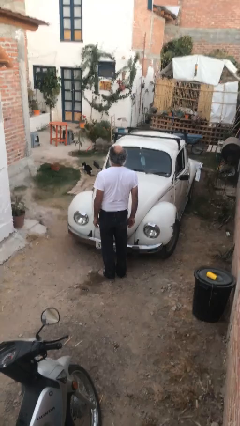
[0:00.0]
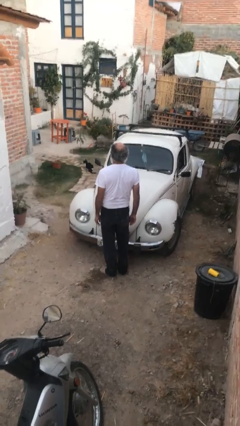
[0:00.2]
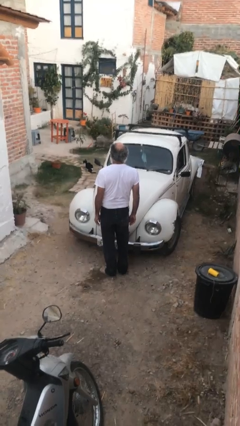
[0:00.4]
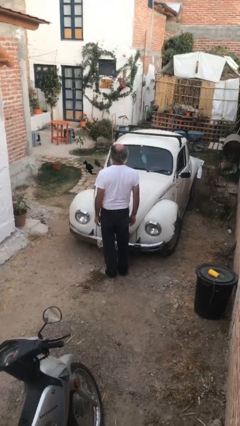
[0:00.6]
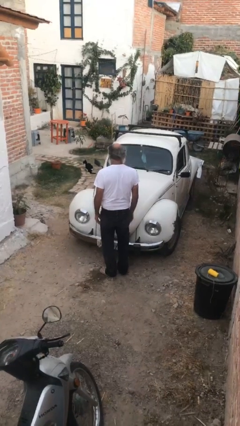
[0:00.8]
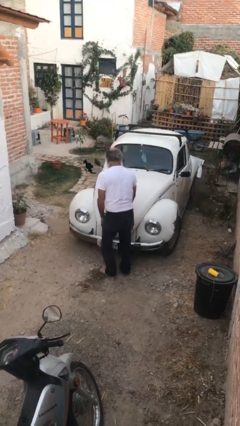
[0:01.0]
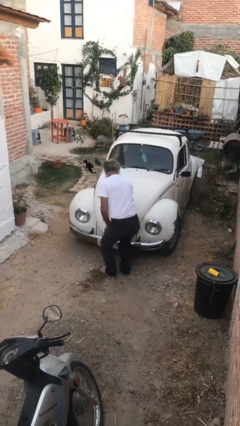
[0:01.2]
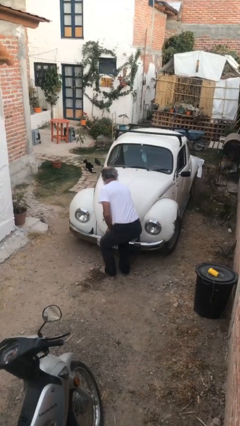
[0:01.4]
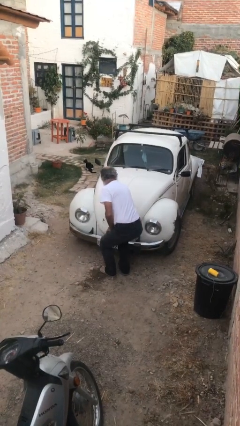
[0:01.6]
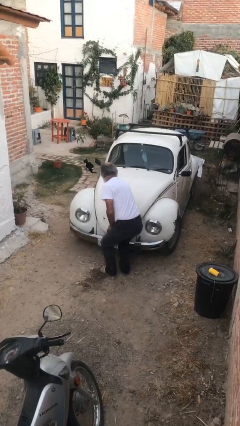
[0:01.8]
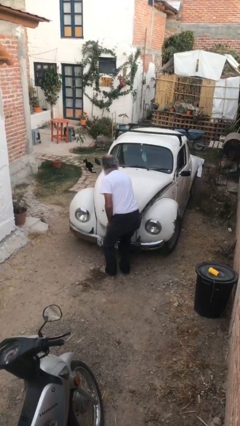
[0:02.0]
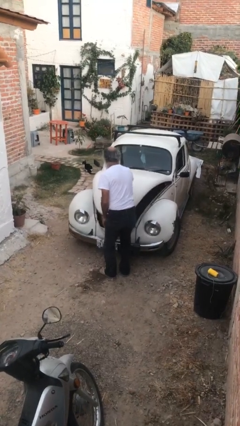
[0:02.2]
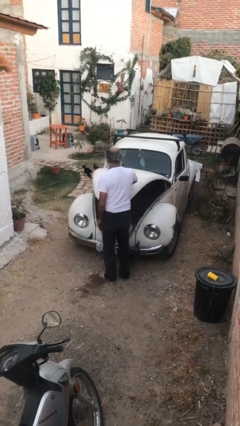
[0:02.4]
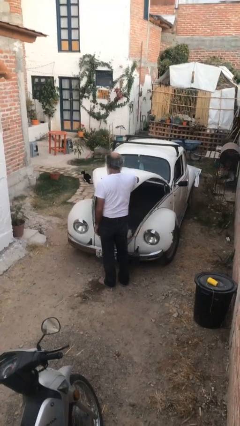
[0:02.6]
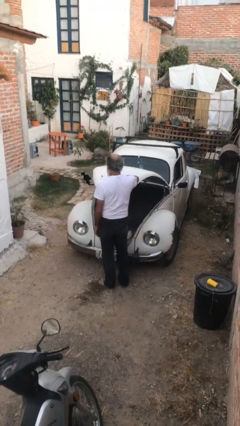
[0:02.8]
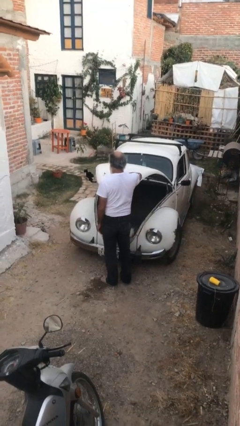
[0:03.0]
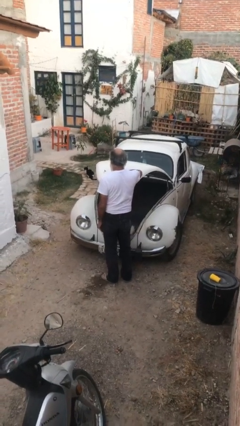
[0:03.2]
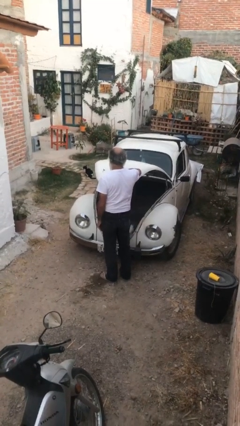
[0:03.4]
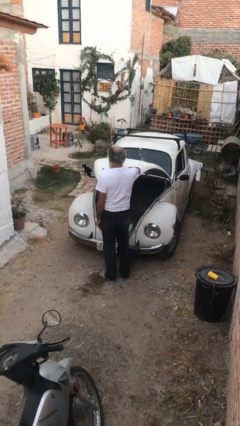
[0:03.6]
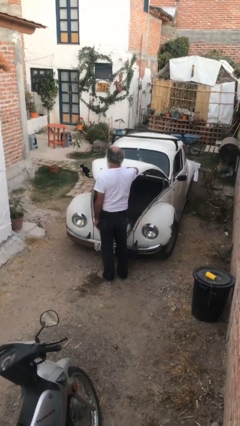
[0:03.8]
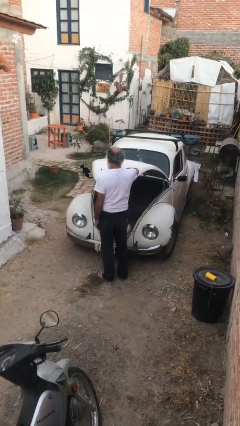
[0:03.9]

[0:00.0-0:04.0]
person opens car trunk

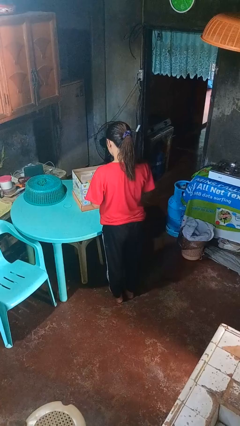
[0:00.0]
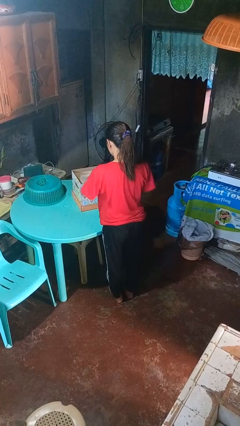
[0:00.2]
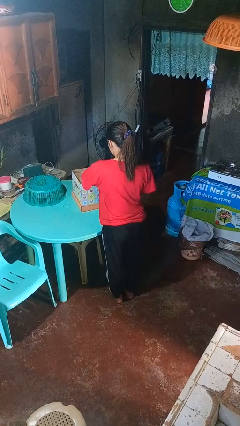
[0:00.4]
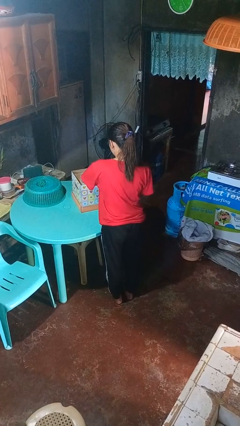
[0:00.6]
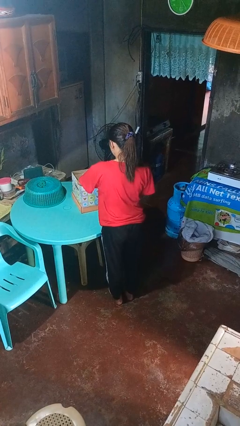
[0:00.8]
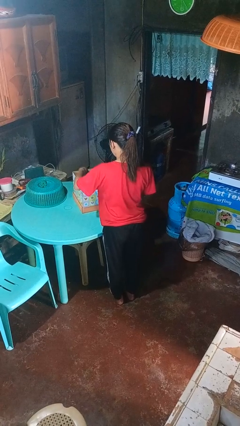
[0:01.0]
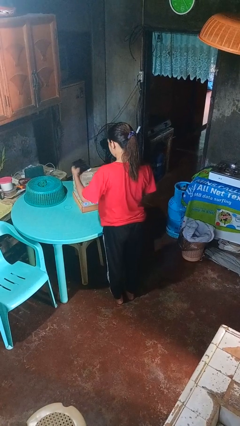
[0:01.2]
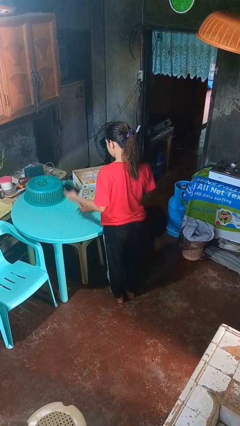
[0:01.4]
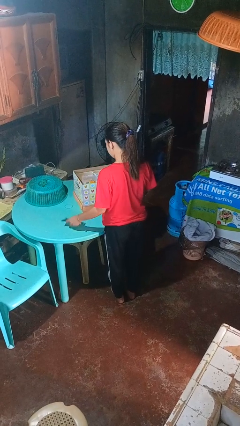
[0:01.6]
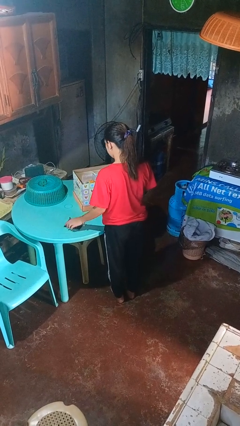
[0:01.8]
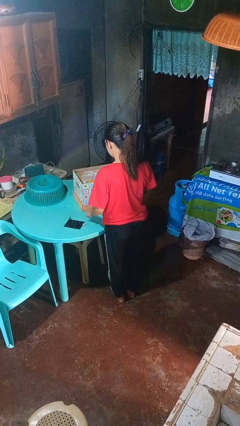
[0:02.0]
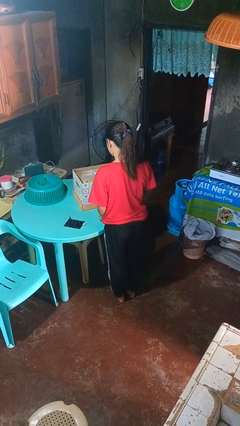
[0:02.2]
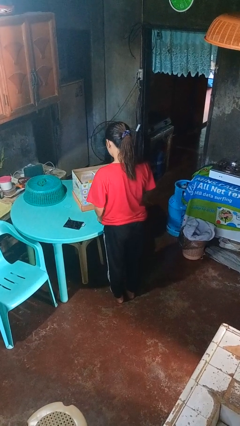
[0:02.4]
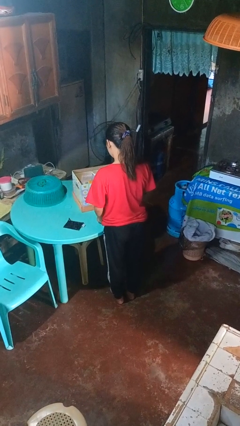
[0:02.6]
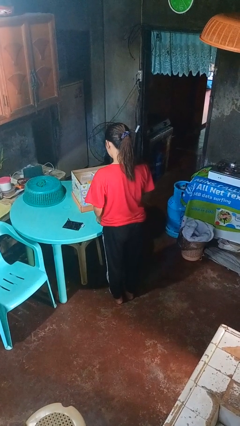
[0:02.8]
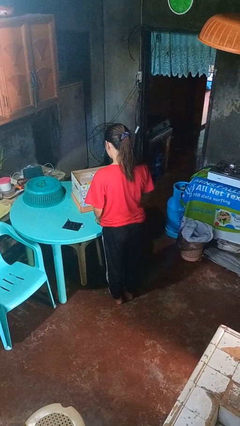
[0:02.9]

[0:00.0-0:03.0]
person takes object from box

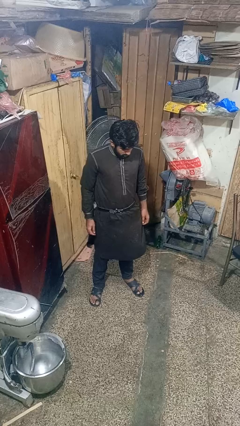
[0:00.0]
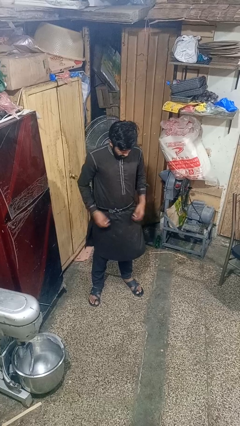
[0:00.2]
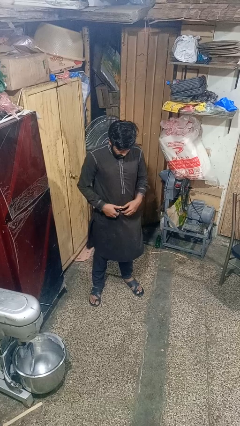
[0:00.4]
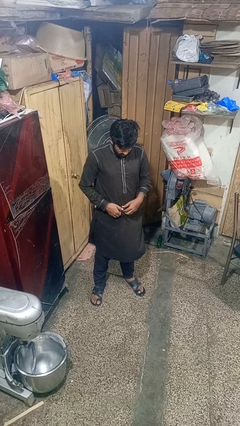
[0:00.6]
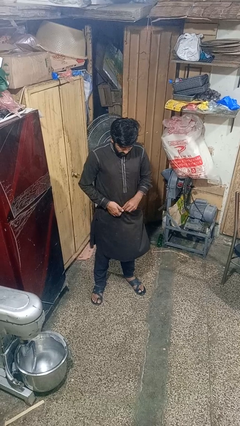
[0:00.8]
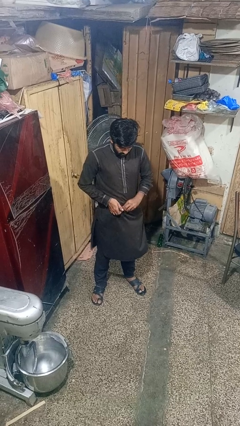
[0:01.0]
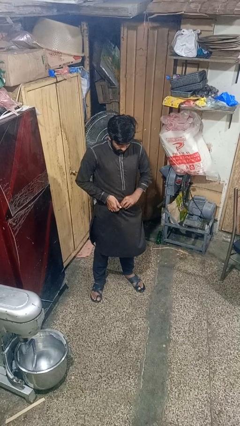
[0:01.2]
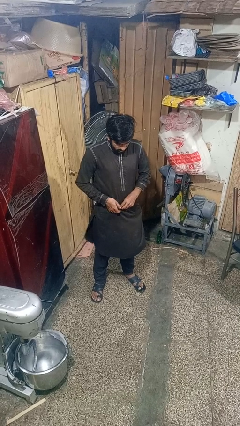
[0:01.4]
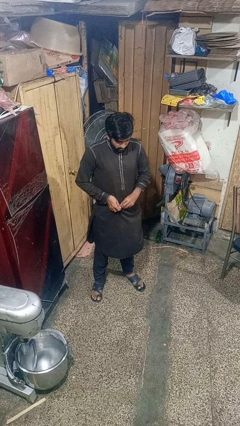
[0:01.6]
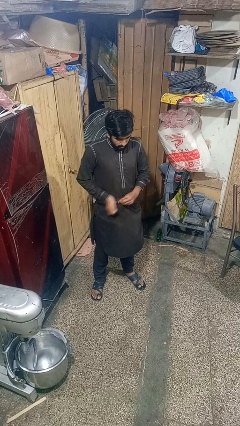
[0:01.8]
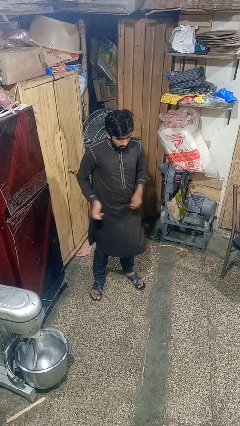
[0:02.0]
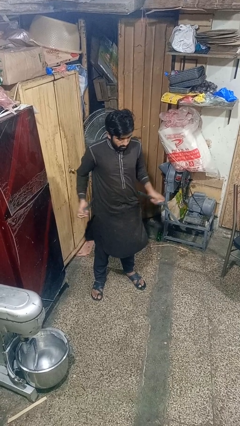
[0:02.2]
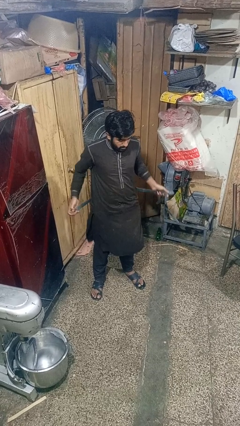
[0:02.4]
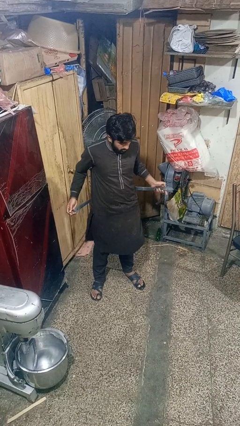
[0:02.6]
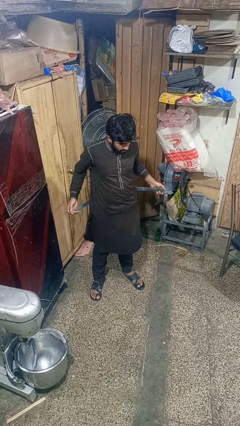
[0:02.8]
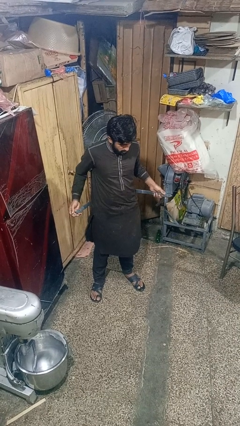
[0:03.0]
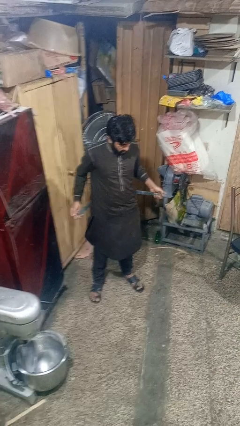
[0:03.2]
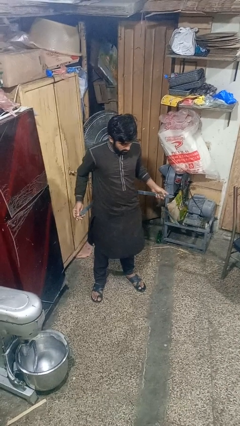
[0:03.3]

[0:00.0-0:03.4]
person takes off belt

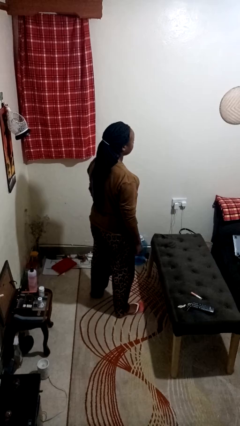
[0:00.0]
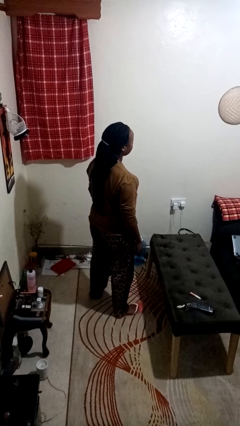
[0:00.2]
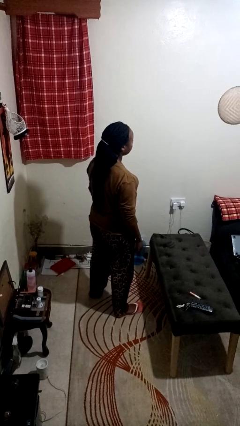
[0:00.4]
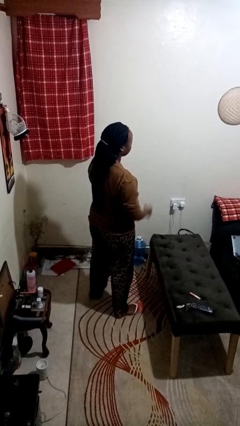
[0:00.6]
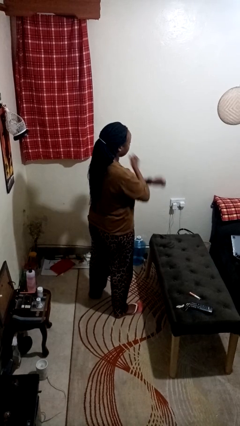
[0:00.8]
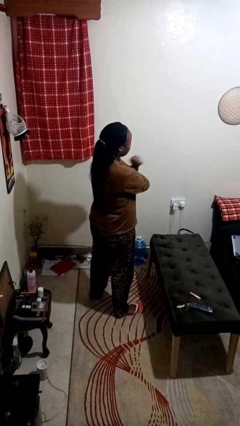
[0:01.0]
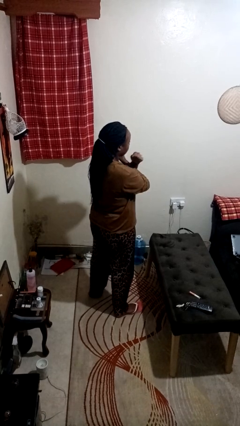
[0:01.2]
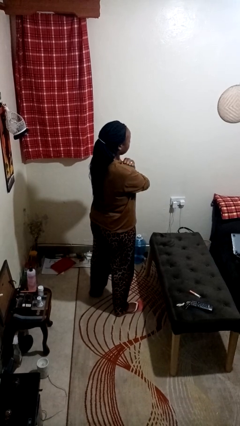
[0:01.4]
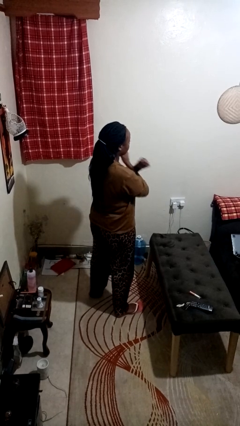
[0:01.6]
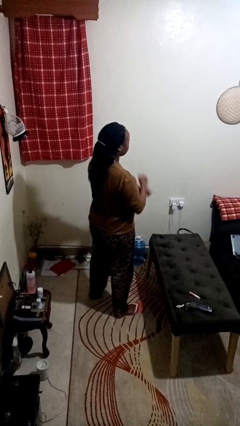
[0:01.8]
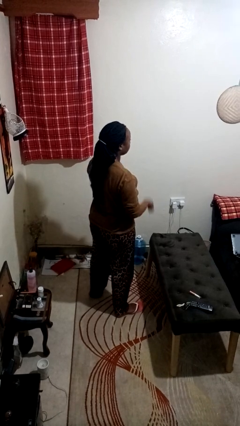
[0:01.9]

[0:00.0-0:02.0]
person gestures arms x

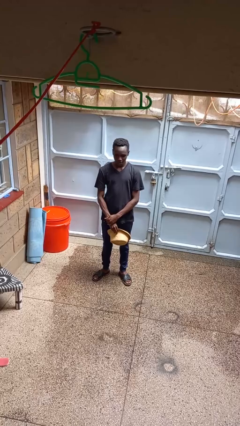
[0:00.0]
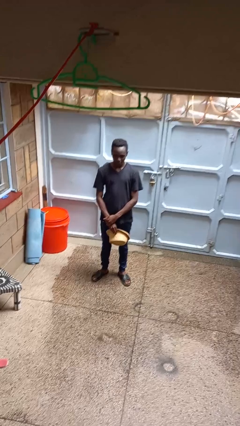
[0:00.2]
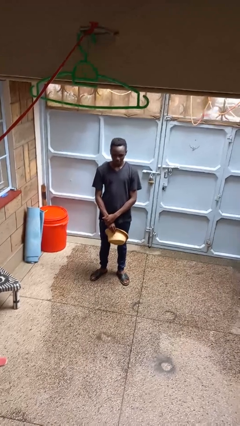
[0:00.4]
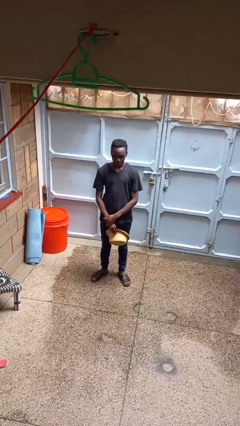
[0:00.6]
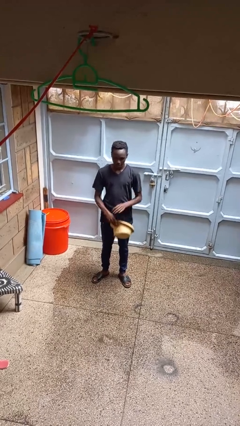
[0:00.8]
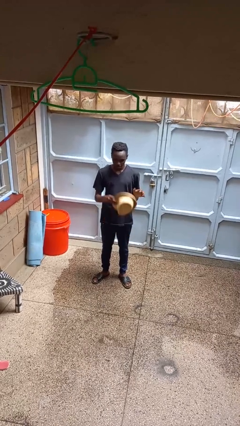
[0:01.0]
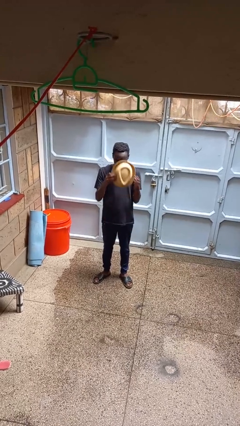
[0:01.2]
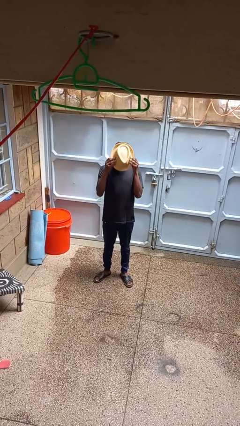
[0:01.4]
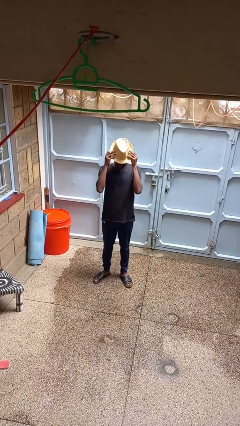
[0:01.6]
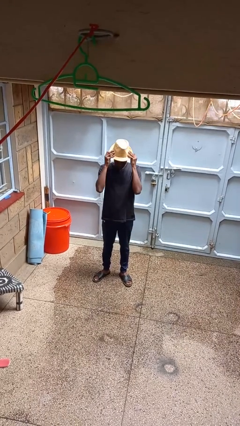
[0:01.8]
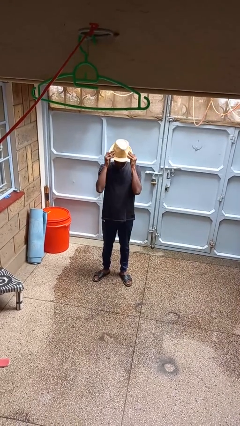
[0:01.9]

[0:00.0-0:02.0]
person puts on hat

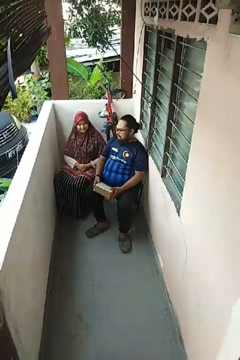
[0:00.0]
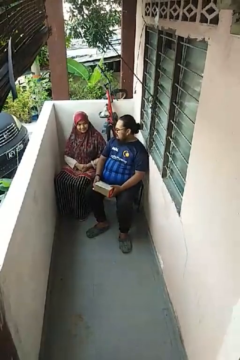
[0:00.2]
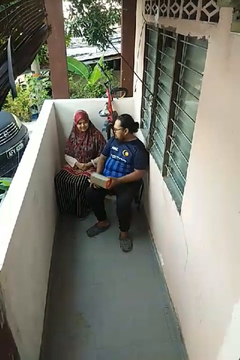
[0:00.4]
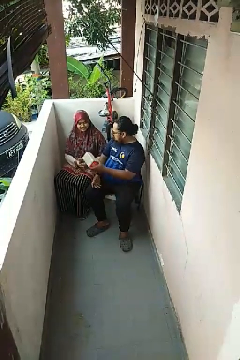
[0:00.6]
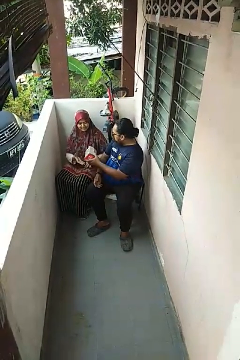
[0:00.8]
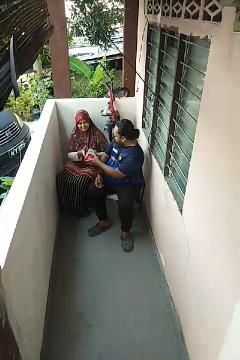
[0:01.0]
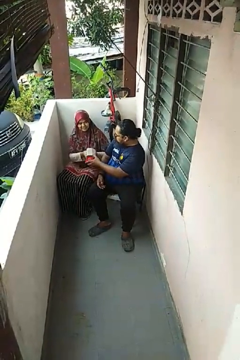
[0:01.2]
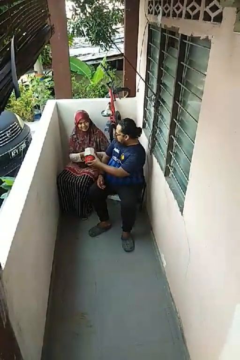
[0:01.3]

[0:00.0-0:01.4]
person transfers object to person

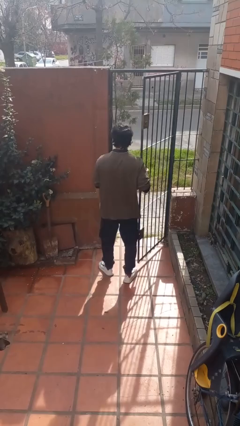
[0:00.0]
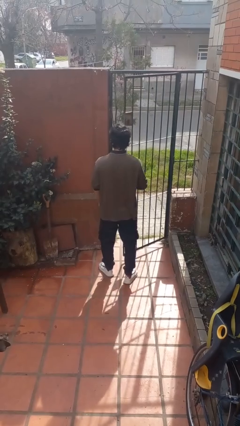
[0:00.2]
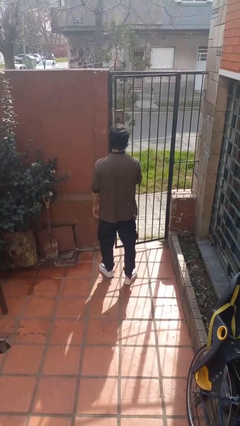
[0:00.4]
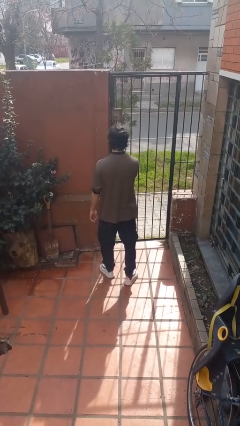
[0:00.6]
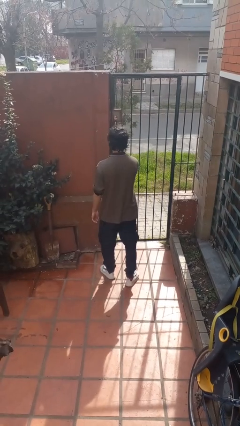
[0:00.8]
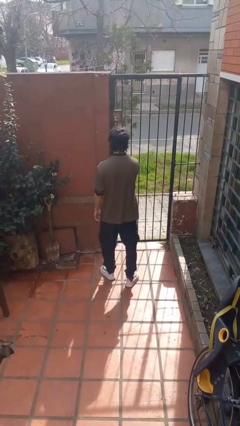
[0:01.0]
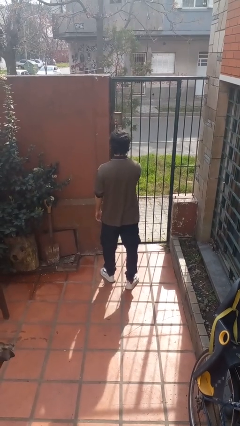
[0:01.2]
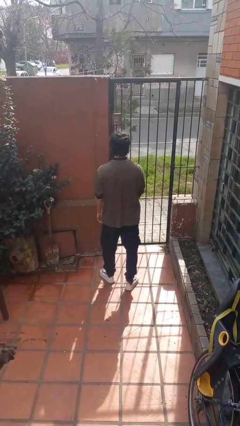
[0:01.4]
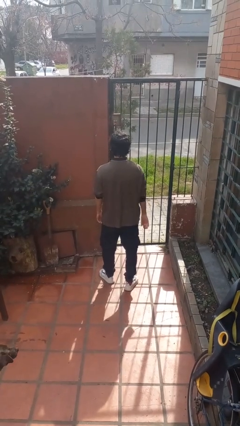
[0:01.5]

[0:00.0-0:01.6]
person closes gate

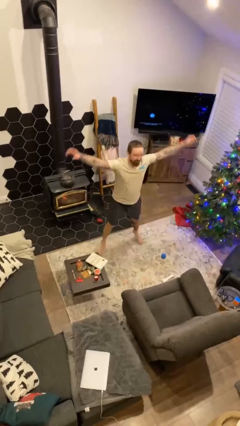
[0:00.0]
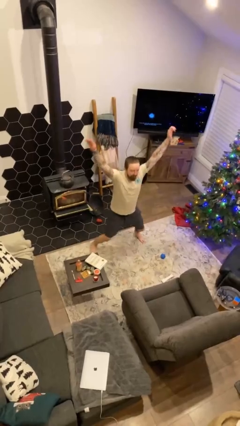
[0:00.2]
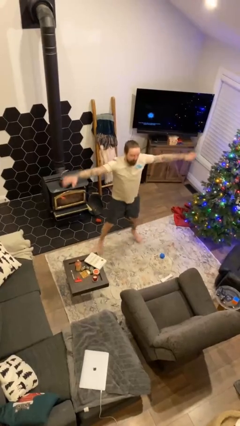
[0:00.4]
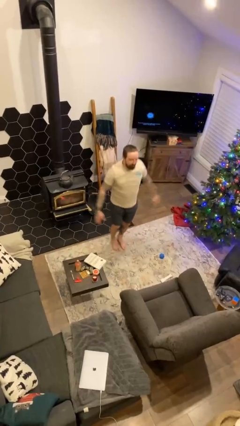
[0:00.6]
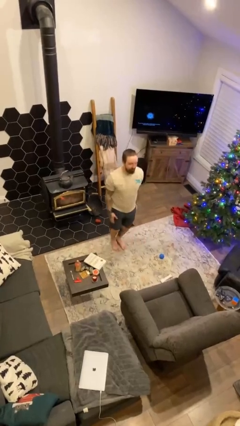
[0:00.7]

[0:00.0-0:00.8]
person exercises with jumping jacks
